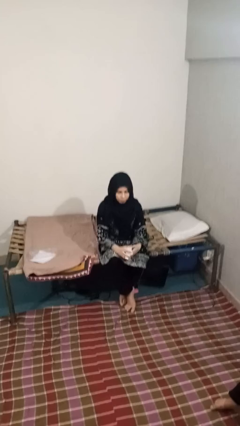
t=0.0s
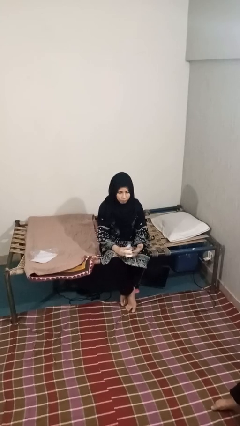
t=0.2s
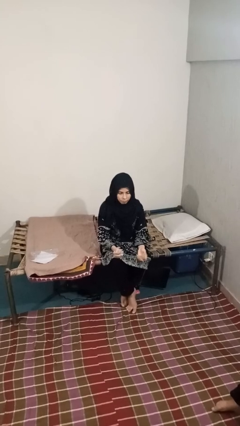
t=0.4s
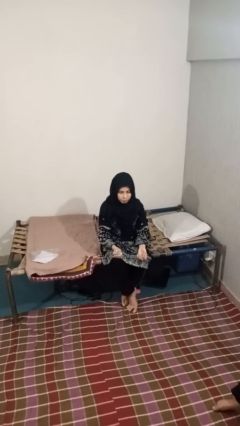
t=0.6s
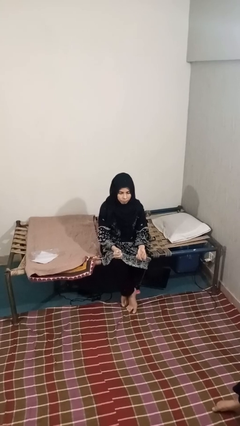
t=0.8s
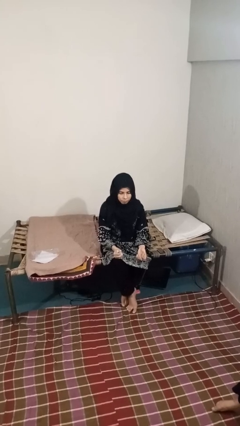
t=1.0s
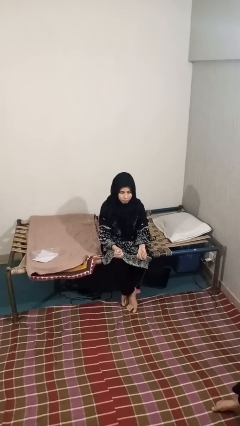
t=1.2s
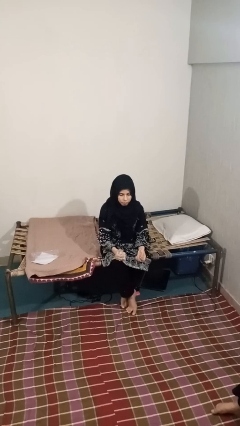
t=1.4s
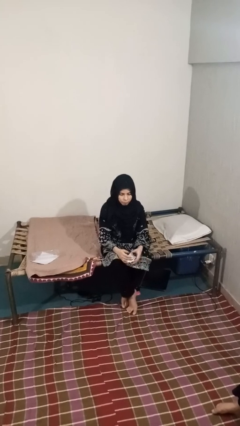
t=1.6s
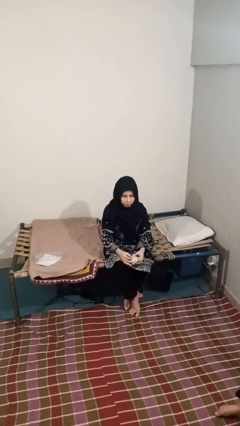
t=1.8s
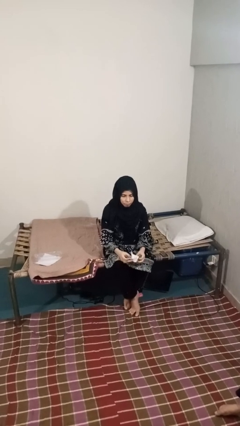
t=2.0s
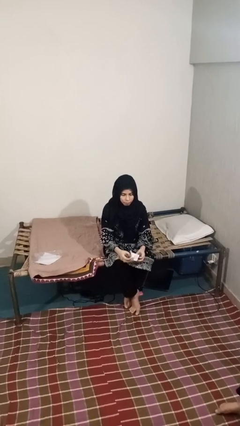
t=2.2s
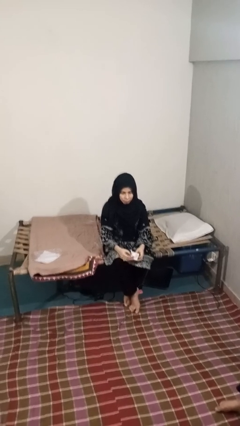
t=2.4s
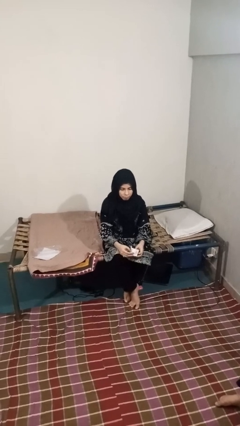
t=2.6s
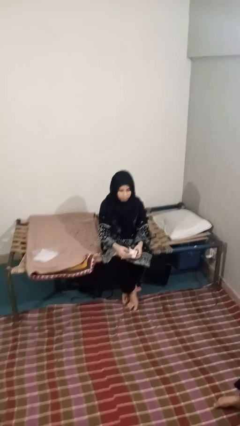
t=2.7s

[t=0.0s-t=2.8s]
person crumples paper

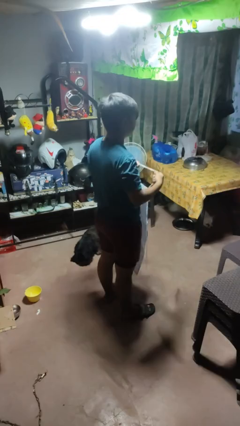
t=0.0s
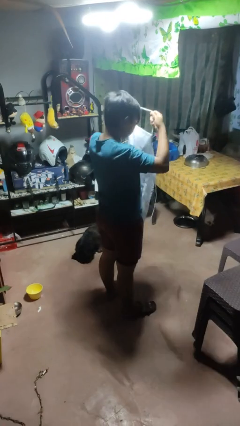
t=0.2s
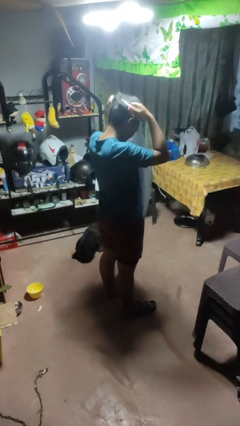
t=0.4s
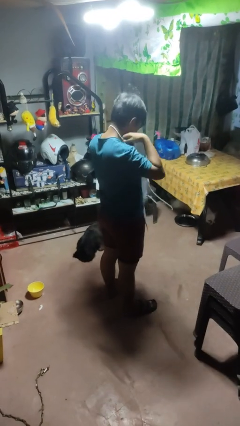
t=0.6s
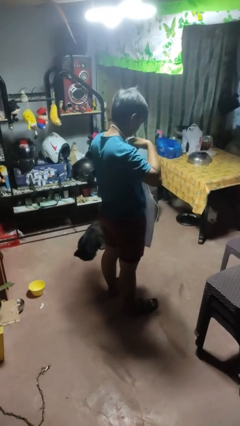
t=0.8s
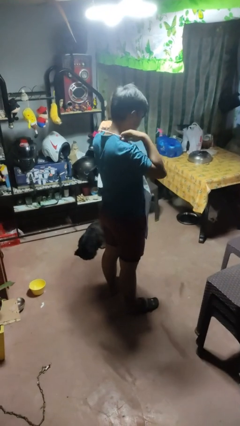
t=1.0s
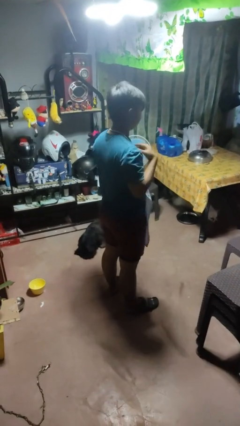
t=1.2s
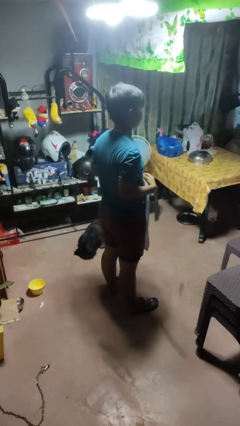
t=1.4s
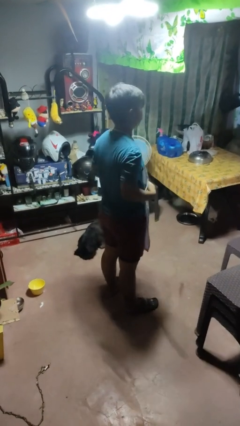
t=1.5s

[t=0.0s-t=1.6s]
person puts on apron

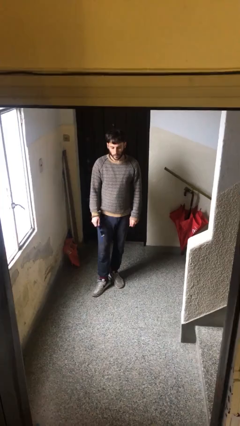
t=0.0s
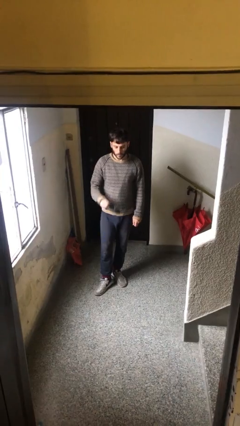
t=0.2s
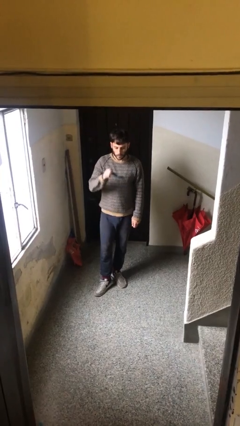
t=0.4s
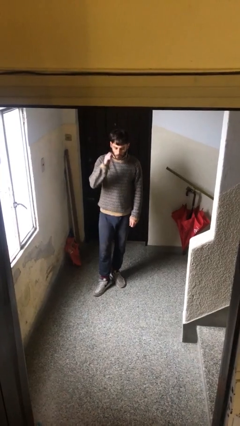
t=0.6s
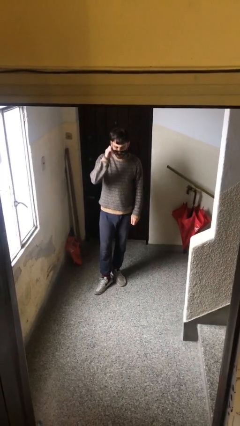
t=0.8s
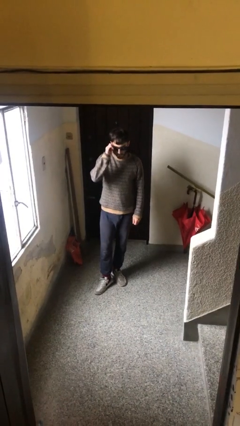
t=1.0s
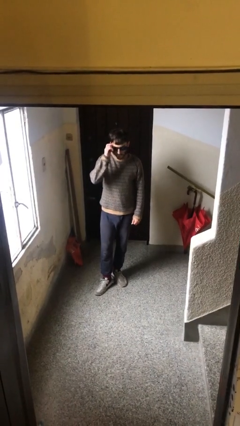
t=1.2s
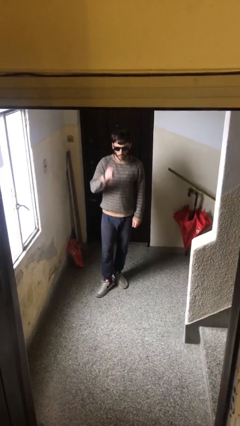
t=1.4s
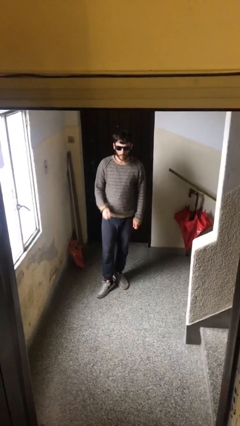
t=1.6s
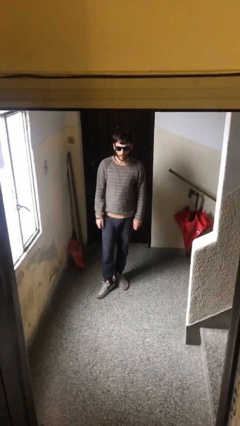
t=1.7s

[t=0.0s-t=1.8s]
person puts on sunglasses

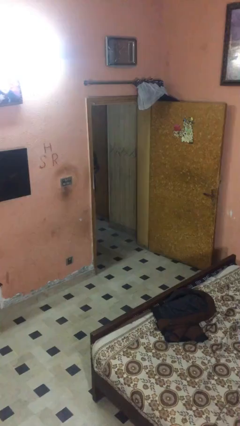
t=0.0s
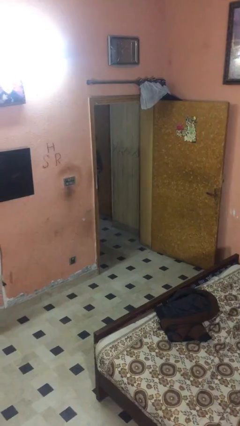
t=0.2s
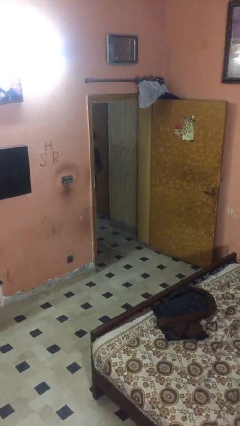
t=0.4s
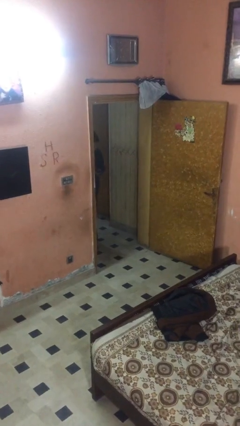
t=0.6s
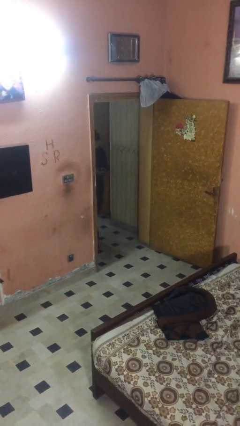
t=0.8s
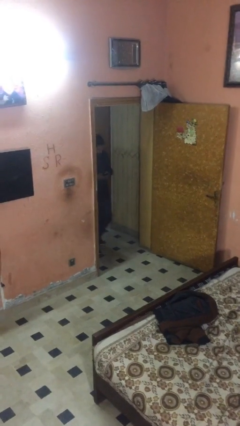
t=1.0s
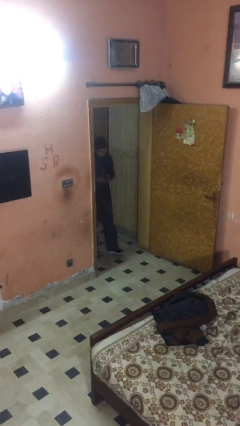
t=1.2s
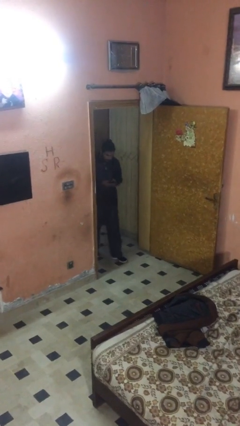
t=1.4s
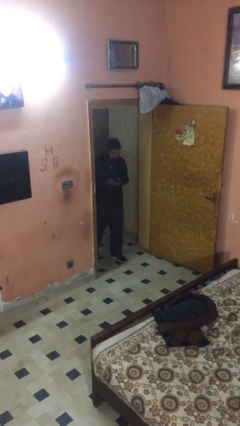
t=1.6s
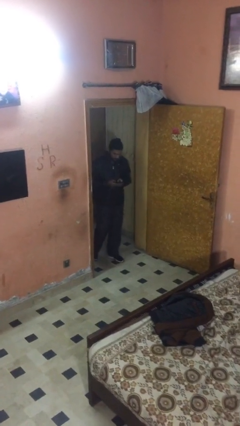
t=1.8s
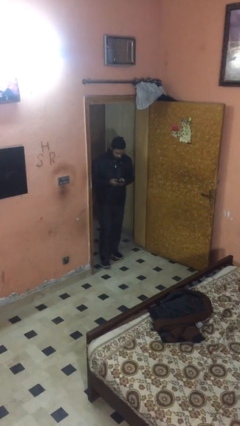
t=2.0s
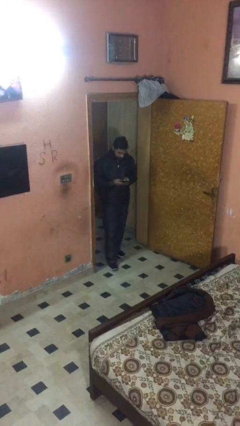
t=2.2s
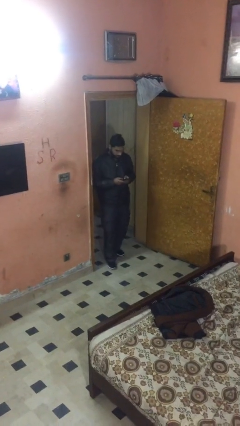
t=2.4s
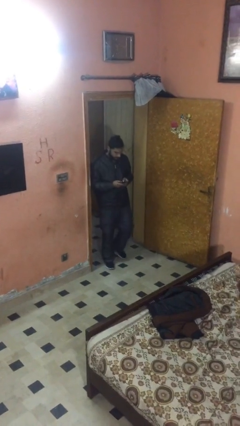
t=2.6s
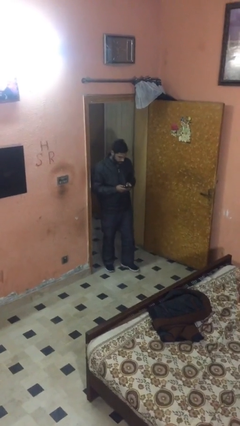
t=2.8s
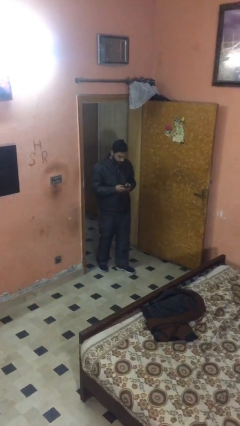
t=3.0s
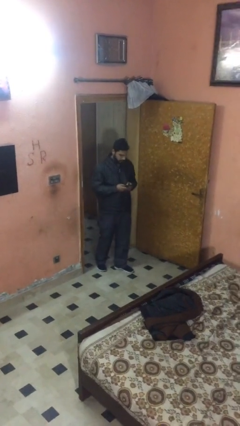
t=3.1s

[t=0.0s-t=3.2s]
person enters scene through structure

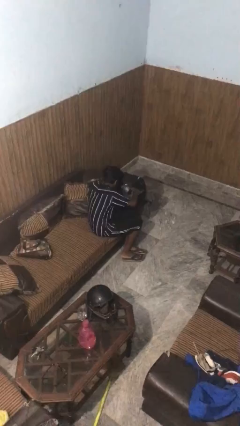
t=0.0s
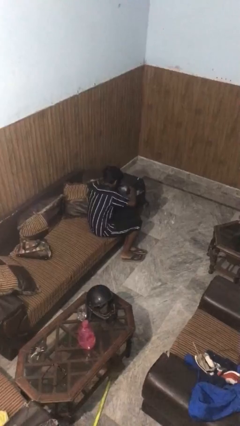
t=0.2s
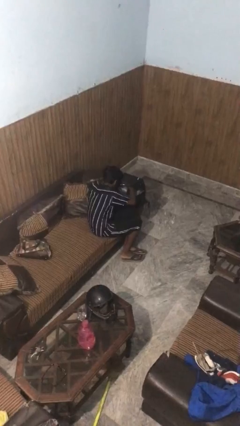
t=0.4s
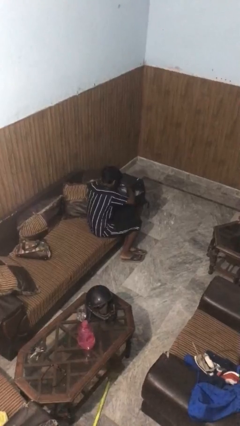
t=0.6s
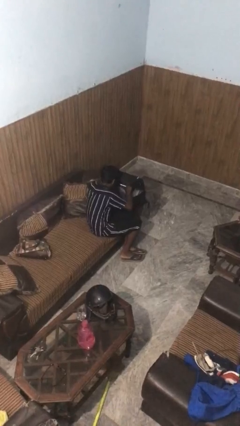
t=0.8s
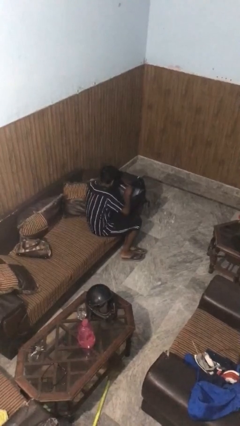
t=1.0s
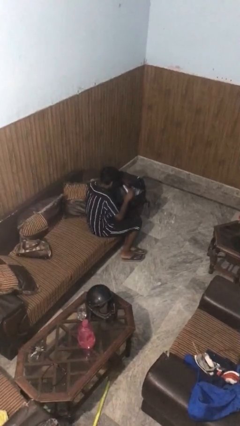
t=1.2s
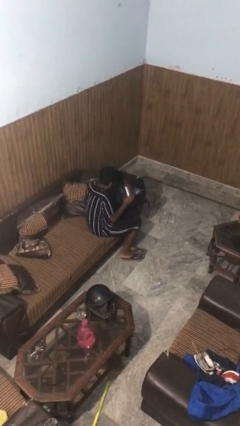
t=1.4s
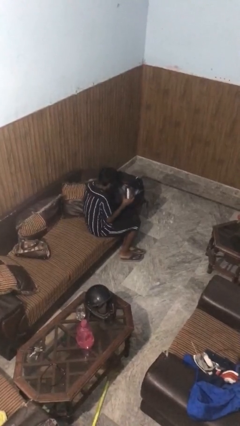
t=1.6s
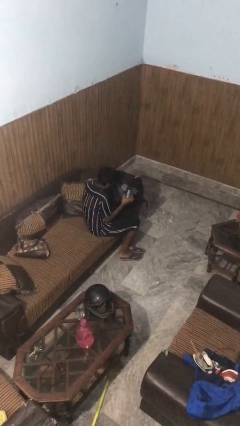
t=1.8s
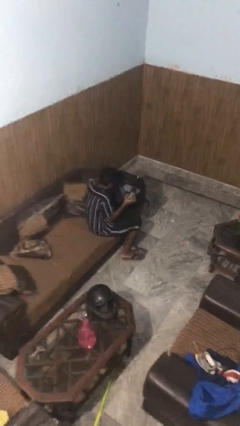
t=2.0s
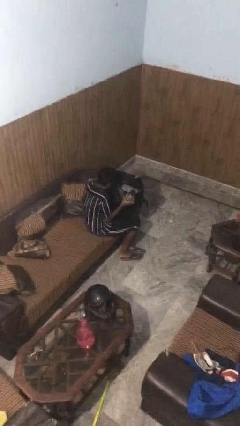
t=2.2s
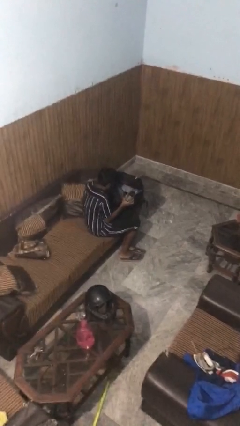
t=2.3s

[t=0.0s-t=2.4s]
person takes object from backpack

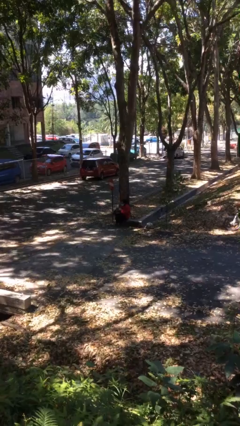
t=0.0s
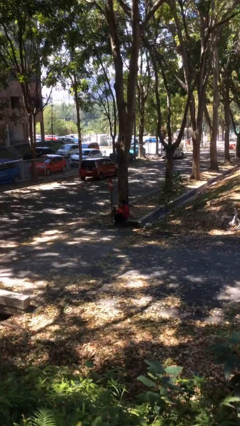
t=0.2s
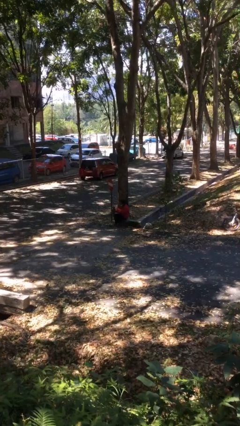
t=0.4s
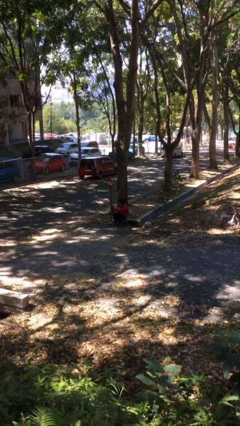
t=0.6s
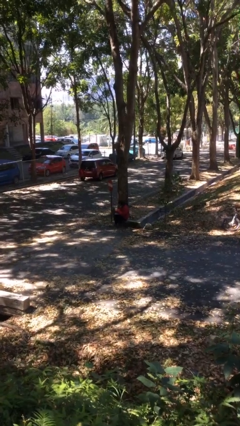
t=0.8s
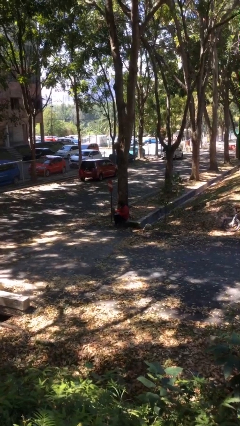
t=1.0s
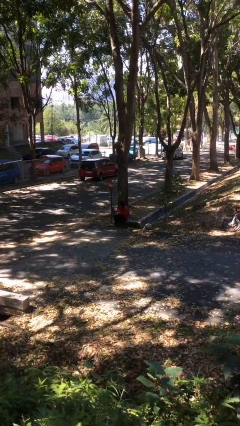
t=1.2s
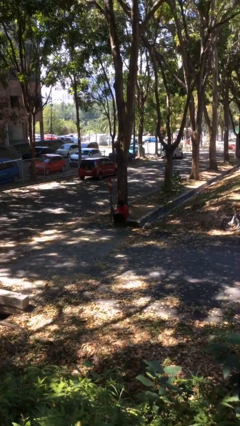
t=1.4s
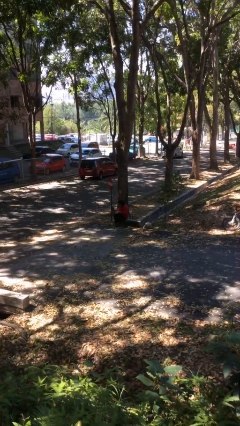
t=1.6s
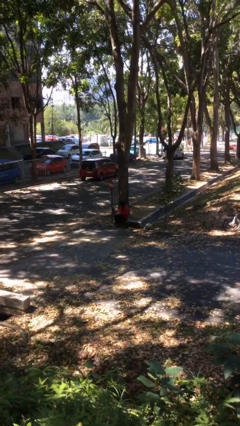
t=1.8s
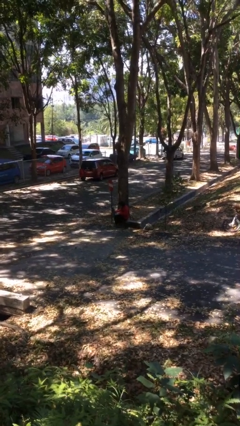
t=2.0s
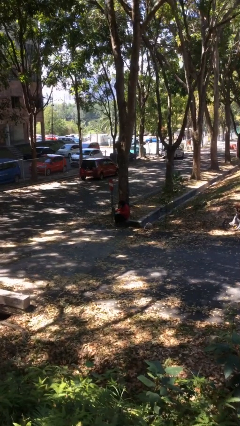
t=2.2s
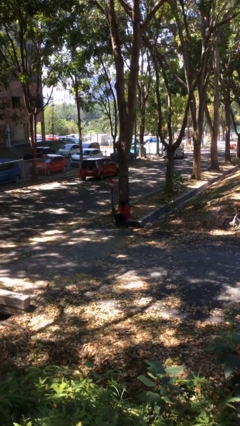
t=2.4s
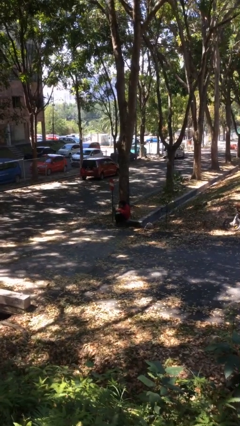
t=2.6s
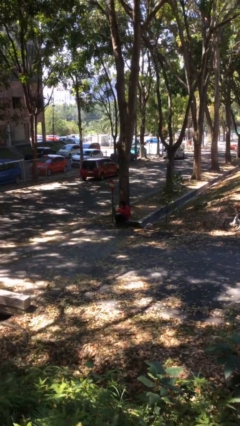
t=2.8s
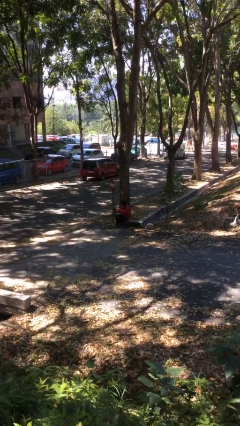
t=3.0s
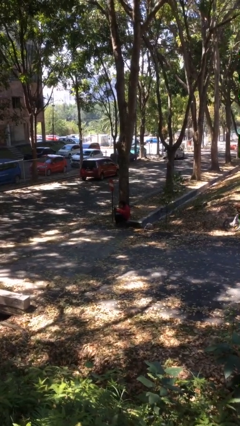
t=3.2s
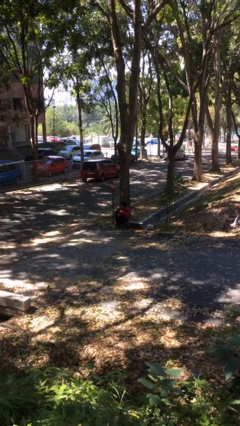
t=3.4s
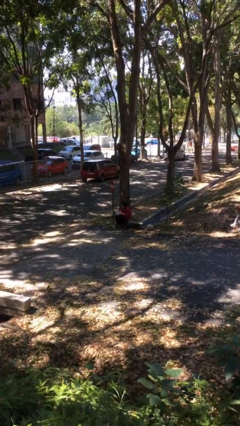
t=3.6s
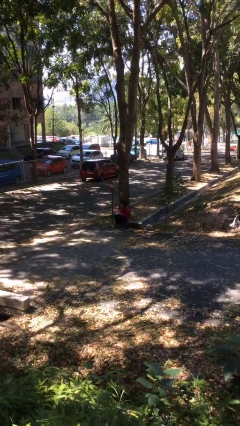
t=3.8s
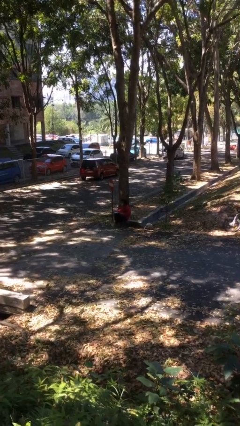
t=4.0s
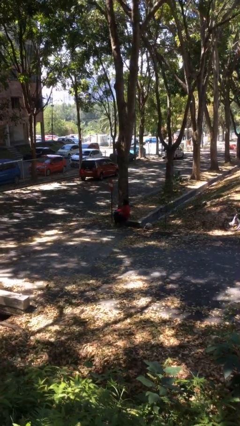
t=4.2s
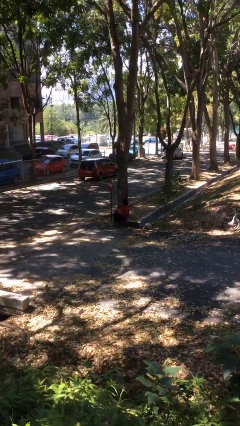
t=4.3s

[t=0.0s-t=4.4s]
person interacts with laptop

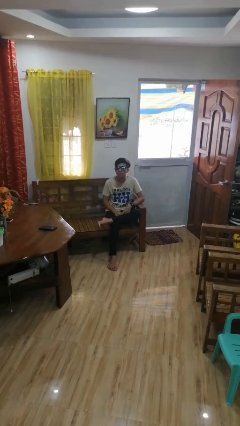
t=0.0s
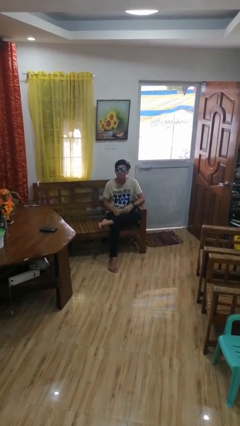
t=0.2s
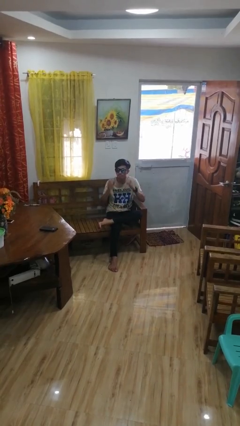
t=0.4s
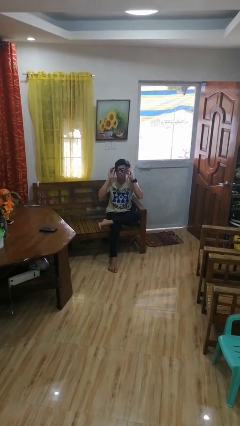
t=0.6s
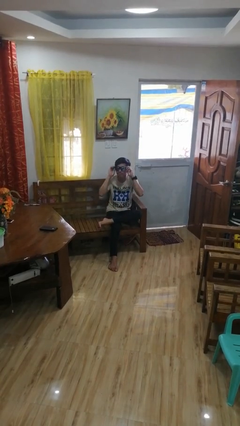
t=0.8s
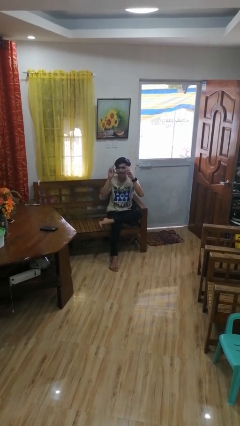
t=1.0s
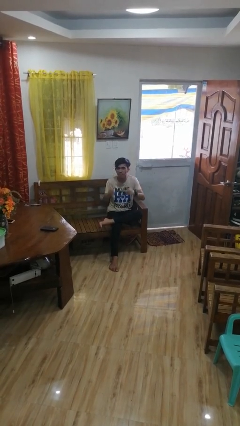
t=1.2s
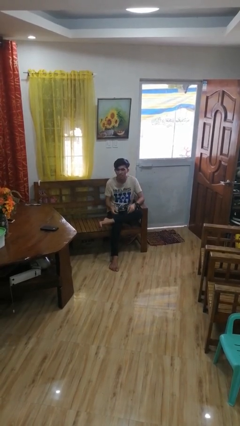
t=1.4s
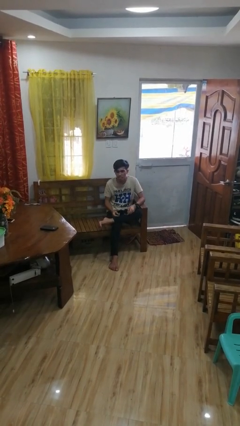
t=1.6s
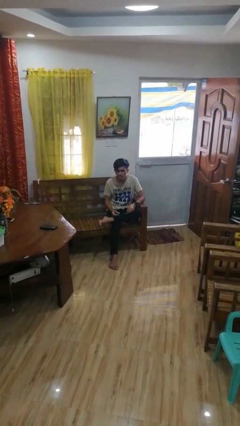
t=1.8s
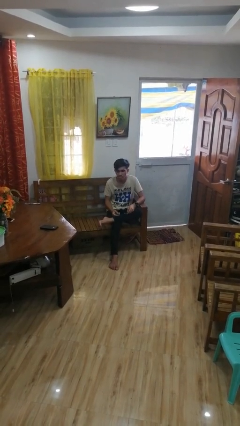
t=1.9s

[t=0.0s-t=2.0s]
person takes off sunglasses
